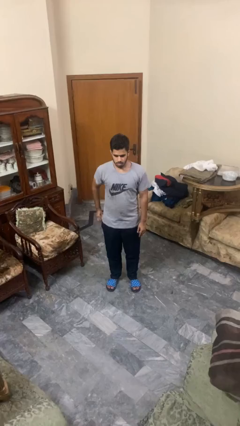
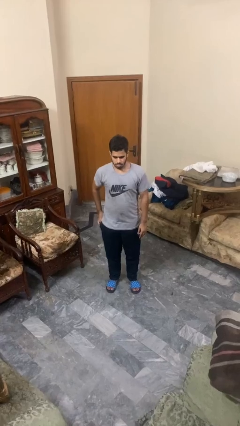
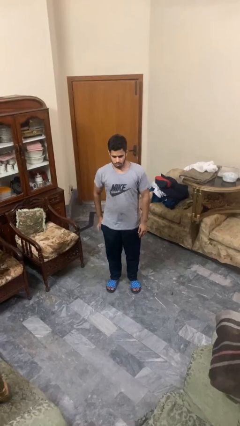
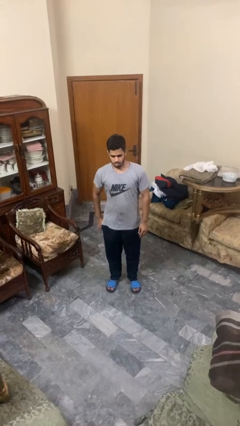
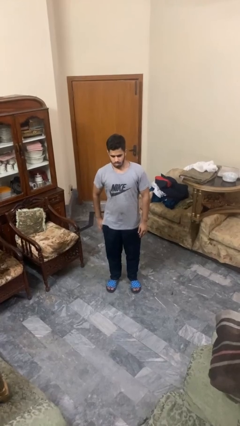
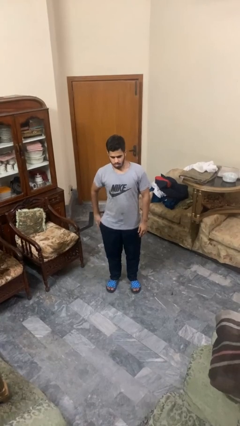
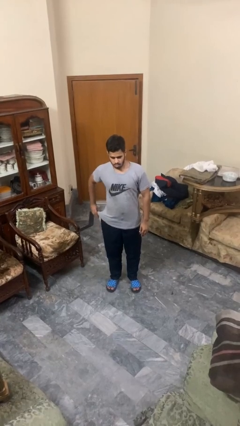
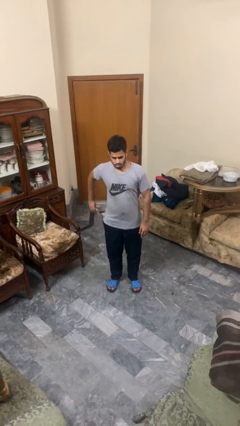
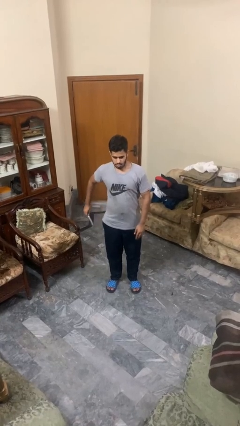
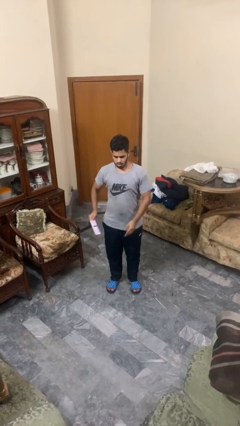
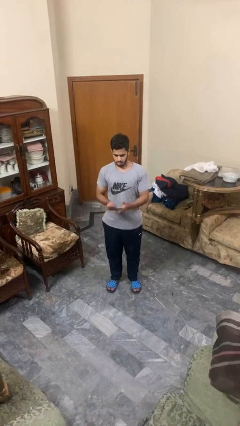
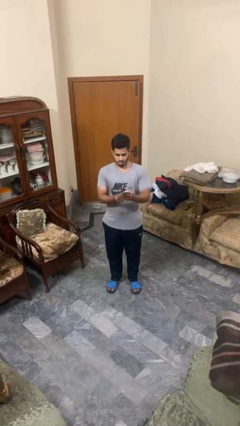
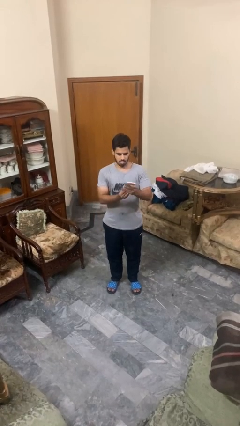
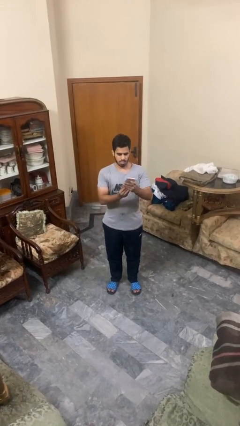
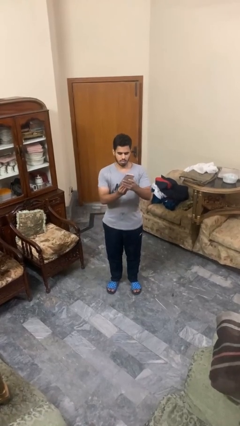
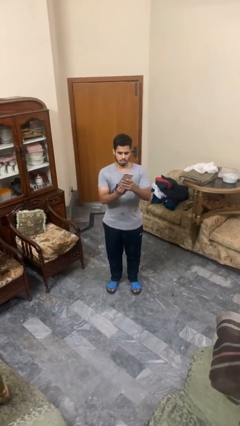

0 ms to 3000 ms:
person takes phone from pocket

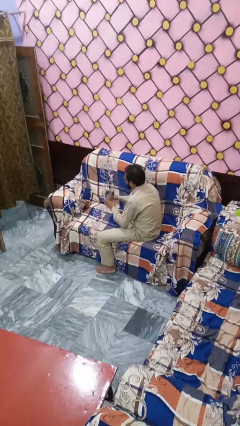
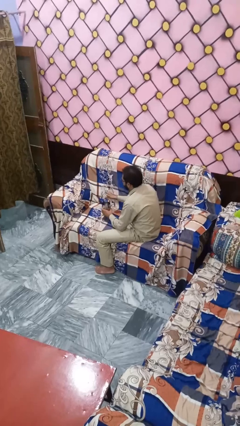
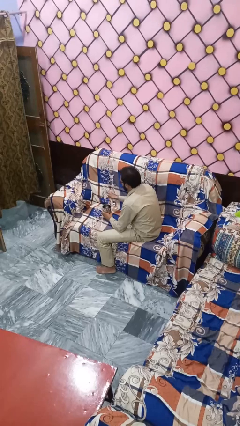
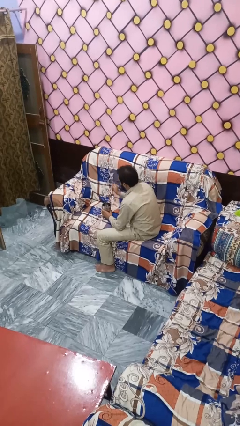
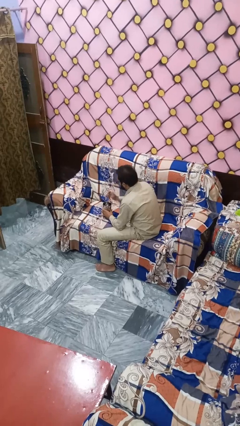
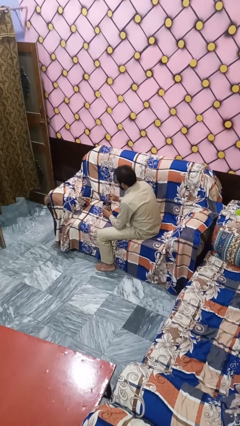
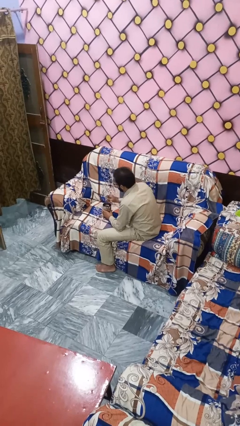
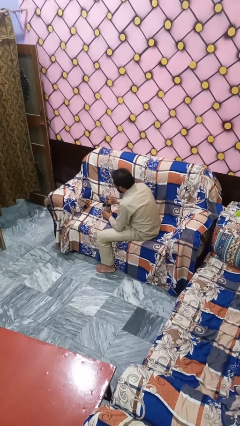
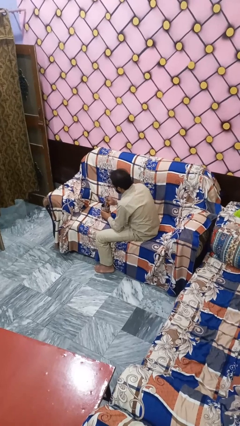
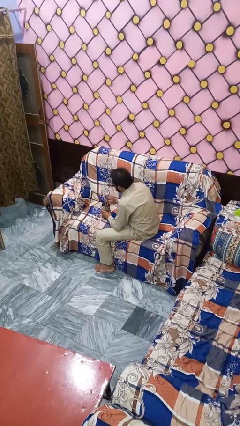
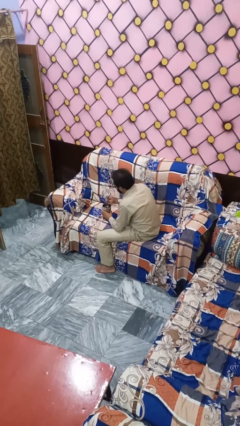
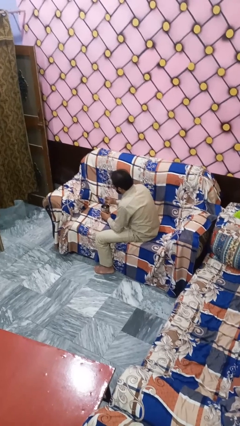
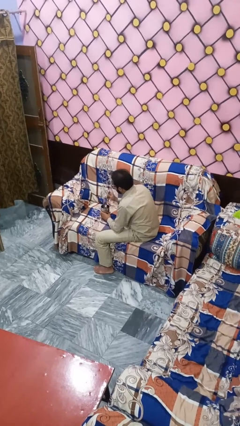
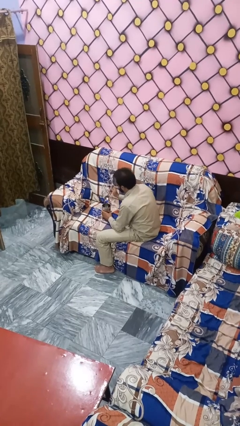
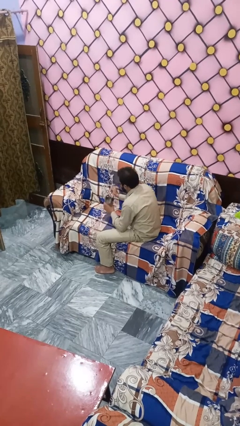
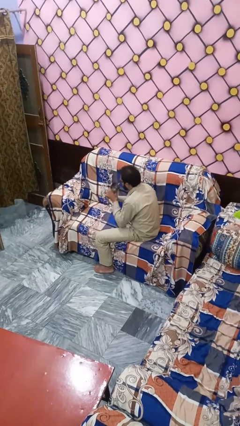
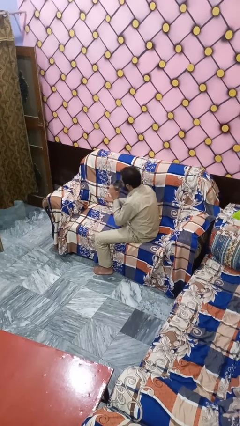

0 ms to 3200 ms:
person stirs mug

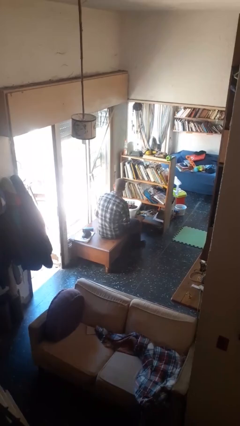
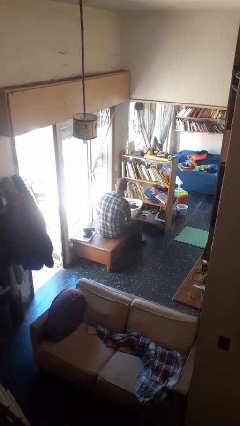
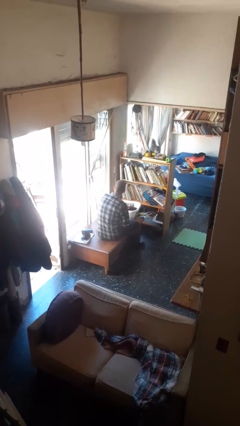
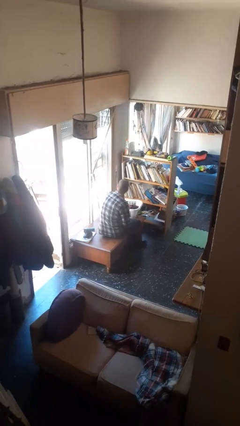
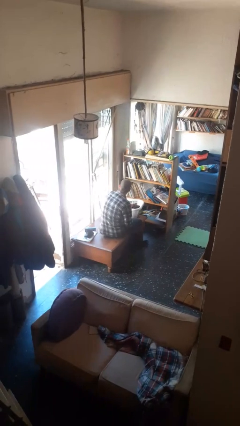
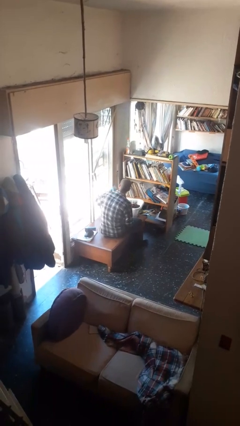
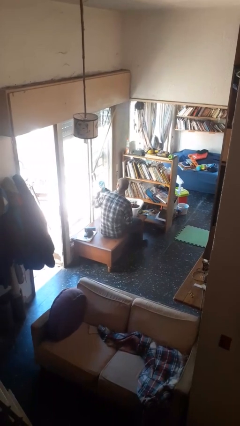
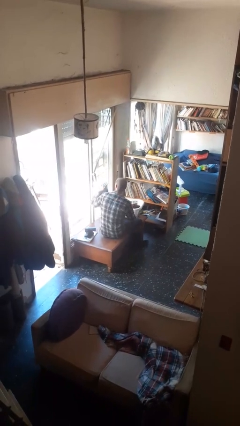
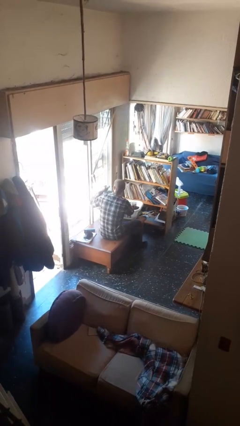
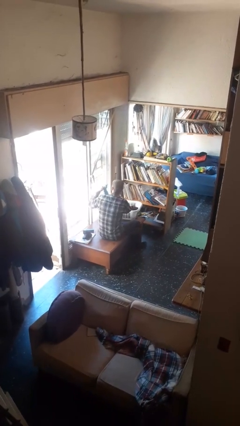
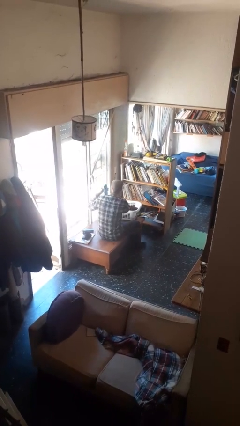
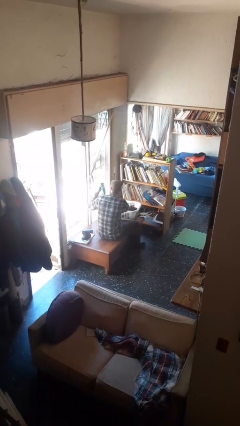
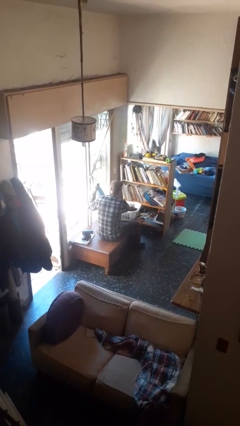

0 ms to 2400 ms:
person takes object from basket

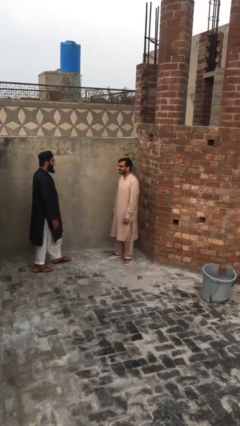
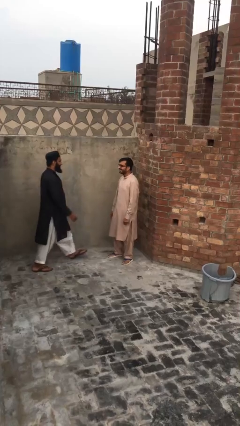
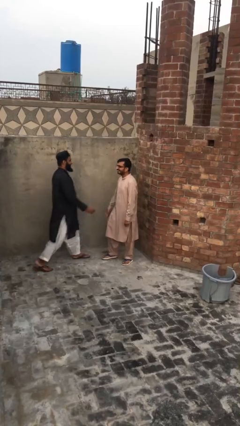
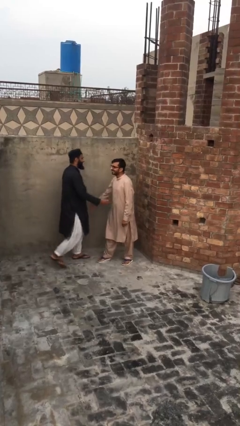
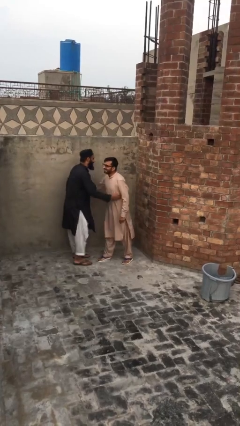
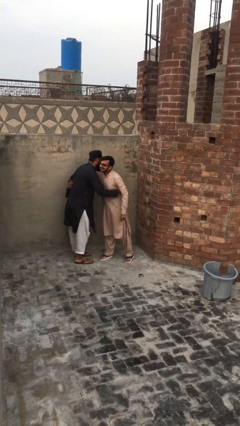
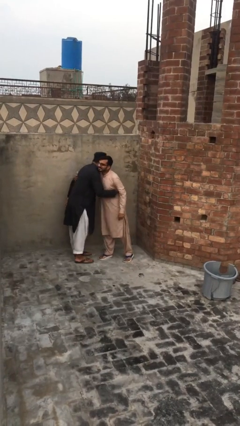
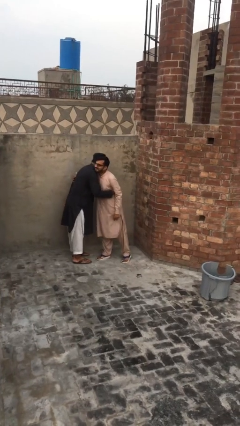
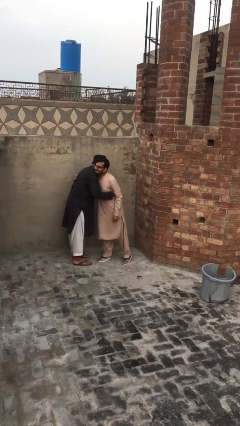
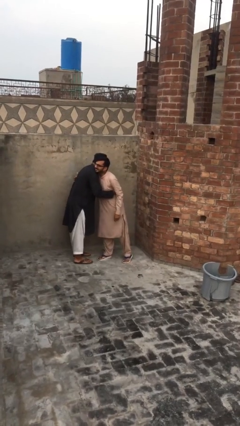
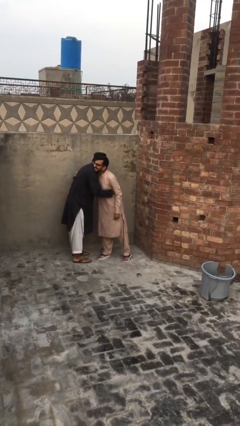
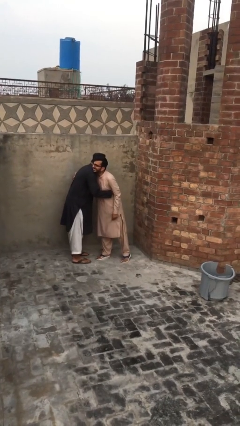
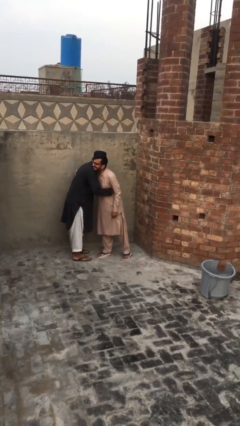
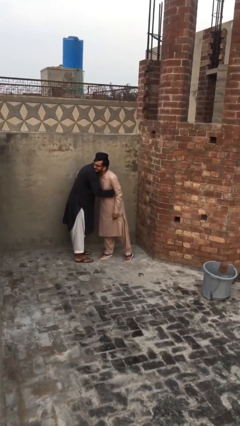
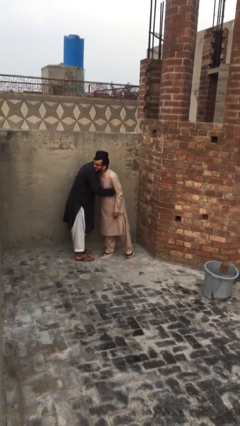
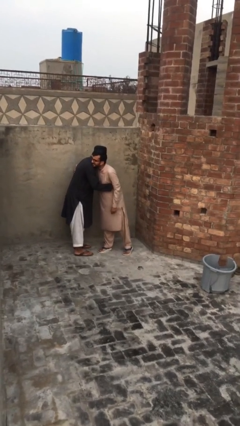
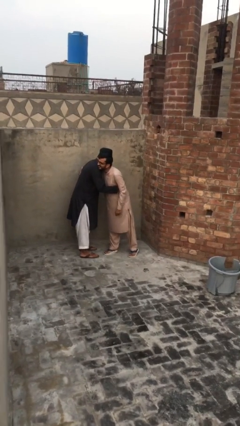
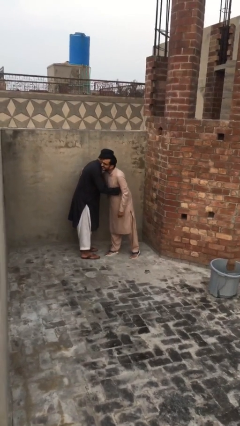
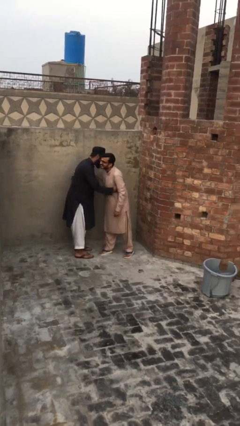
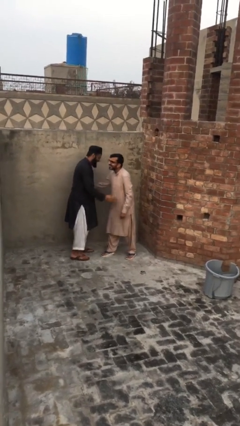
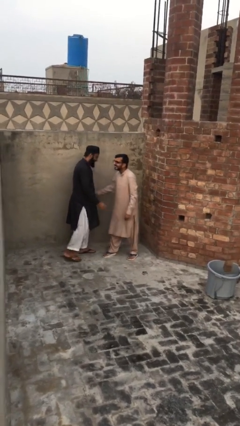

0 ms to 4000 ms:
person embraces person

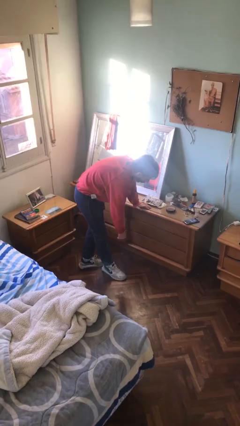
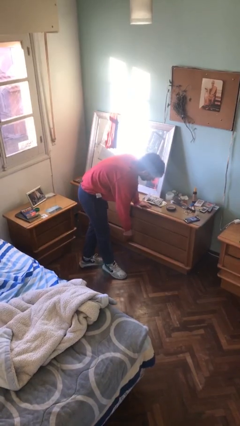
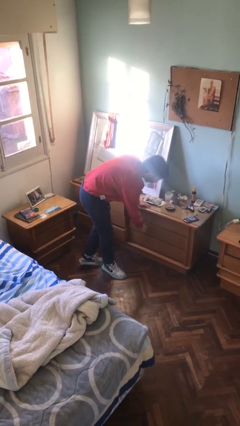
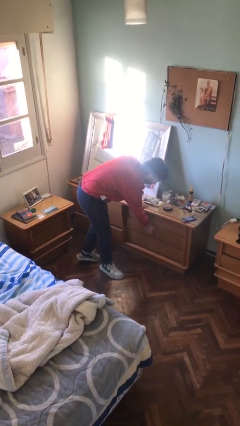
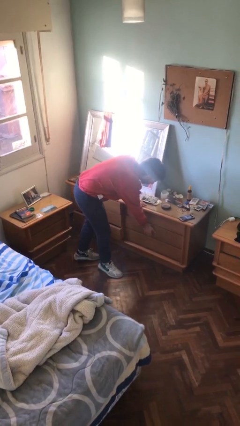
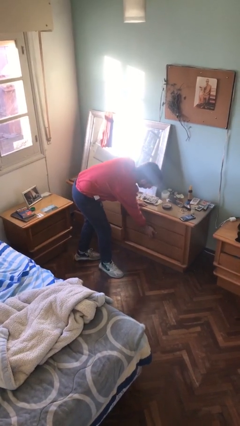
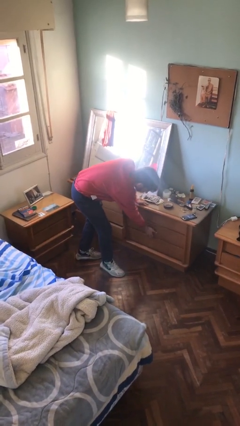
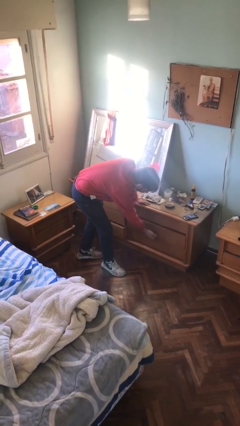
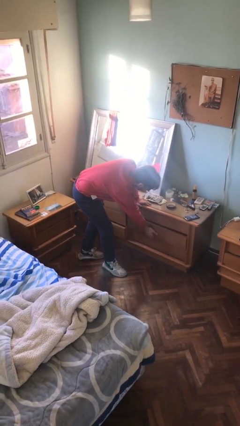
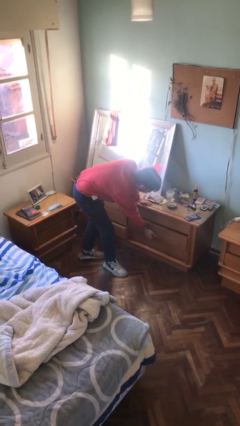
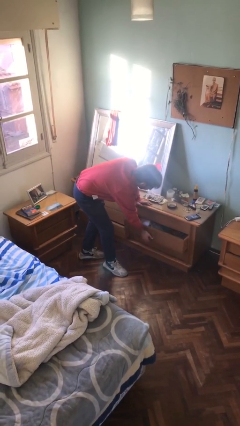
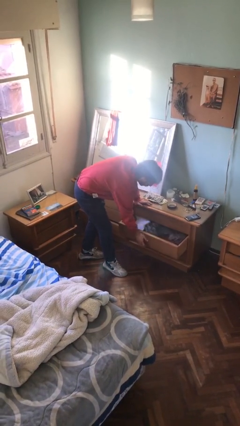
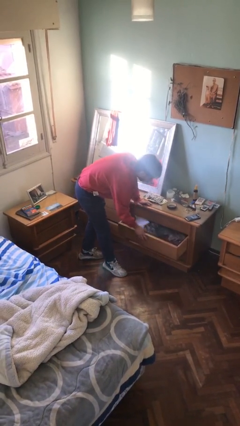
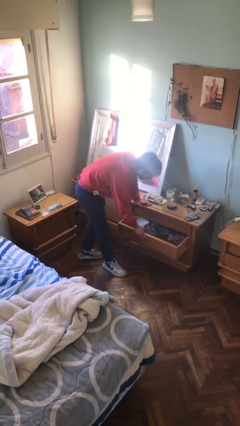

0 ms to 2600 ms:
person opens dresser drawer

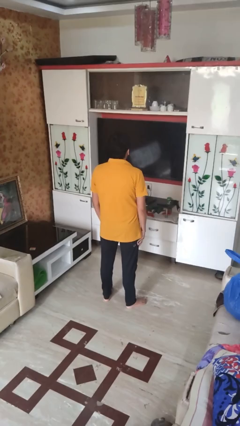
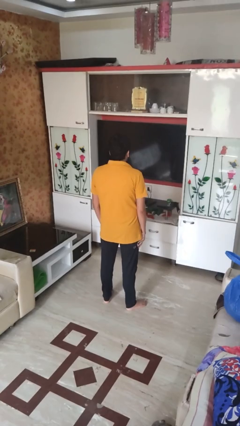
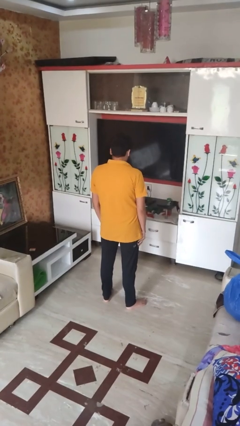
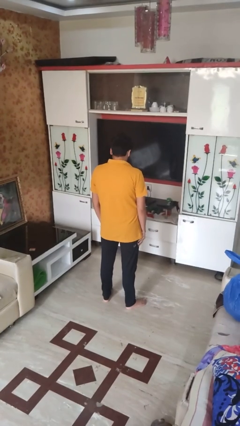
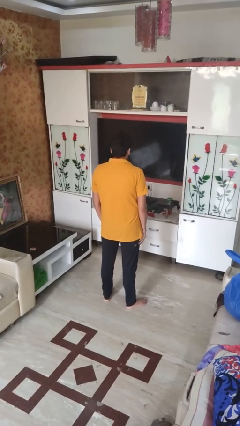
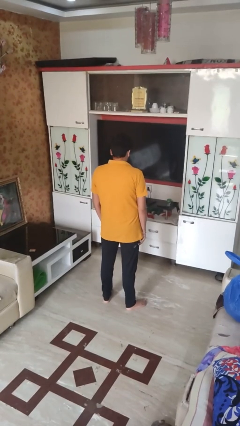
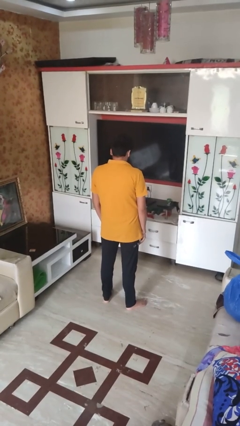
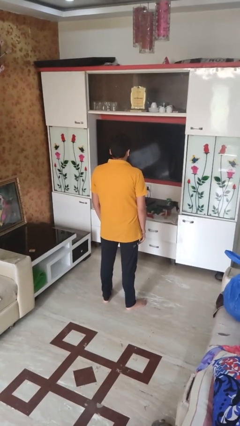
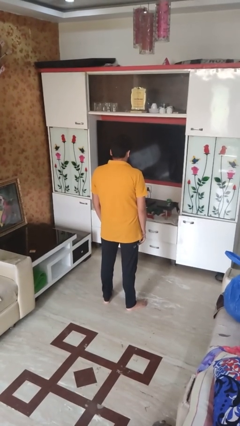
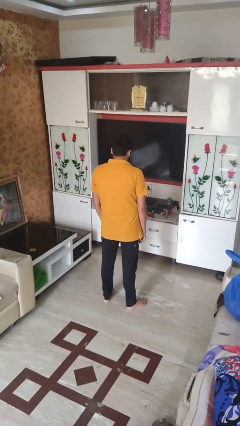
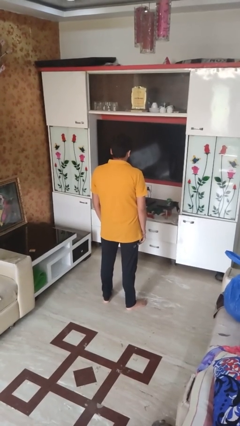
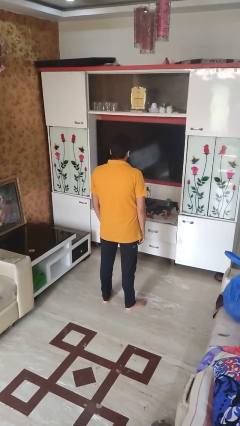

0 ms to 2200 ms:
person nods head
